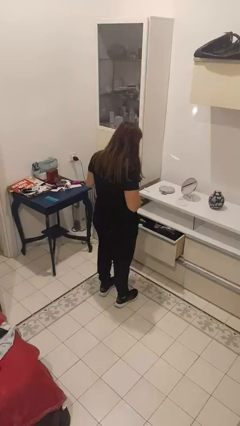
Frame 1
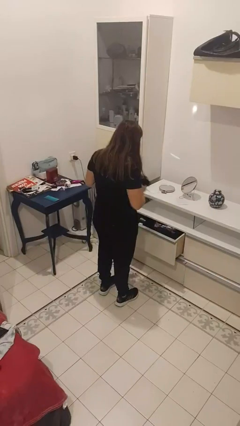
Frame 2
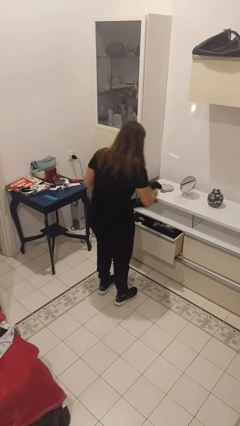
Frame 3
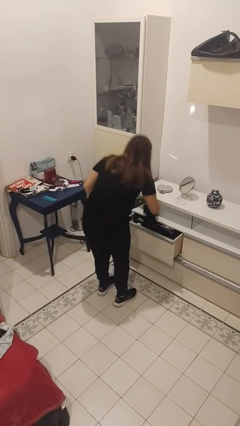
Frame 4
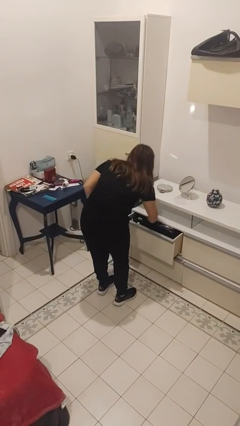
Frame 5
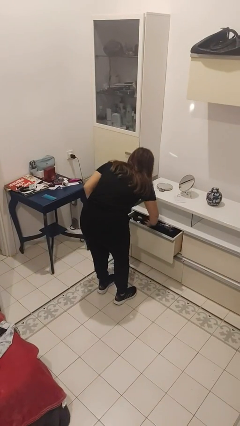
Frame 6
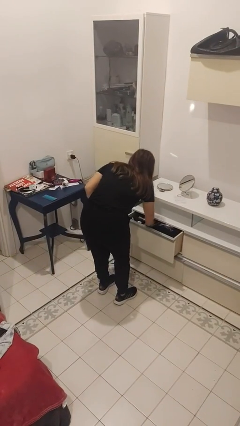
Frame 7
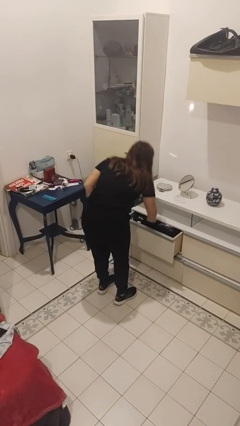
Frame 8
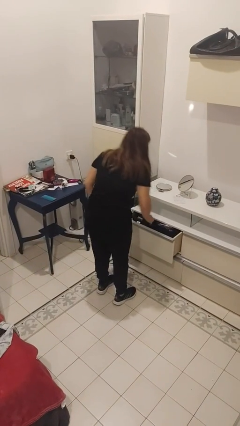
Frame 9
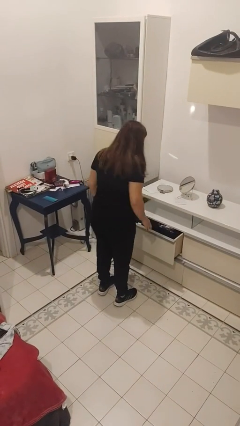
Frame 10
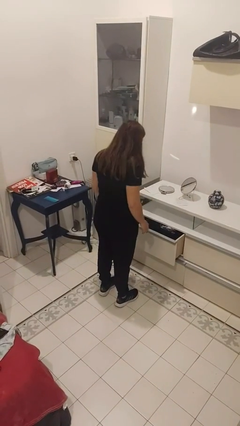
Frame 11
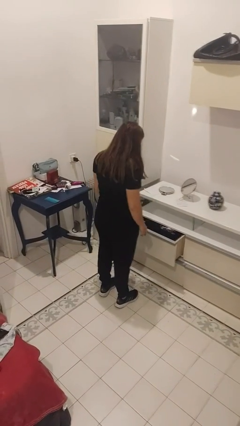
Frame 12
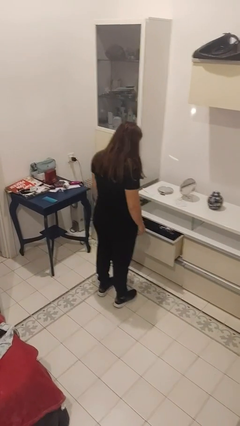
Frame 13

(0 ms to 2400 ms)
person puts clothes into dresser

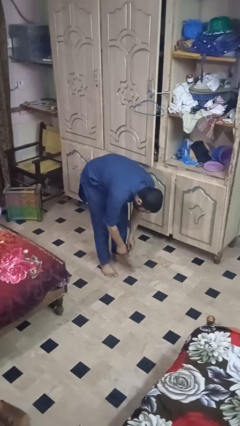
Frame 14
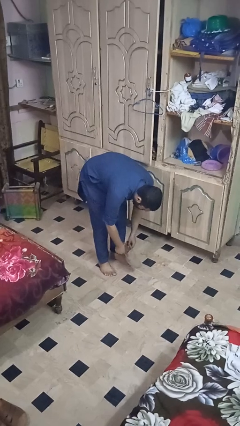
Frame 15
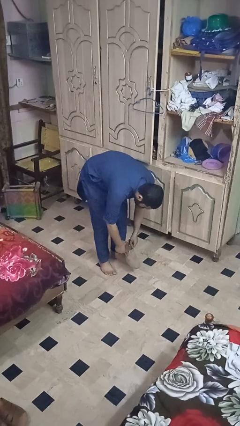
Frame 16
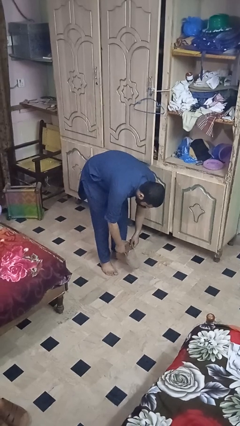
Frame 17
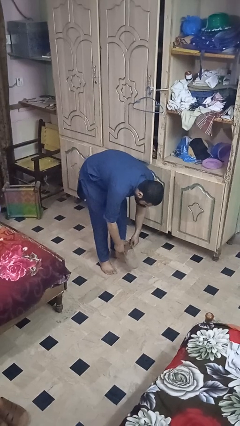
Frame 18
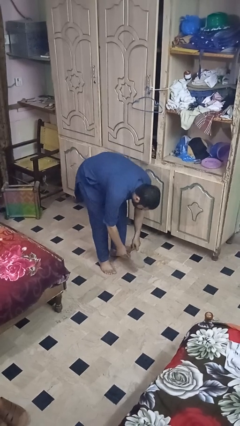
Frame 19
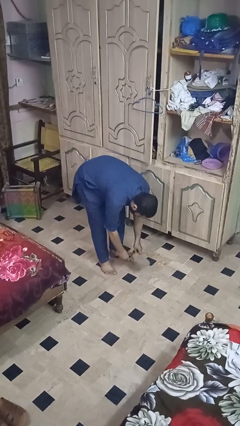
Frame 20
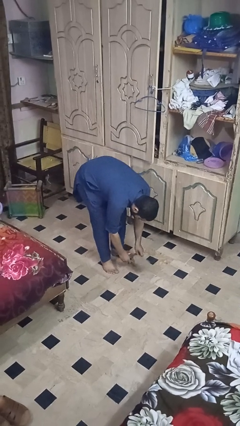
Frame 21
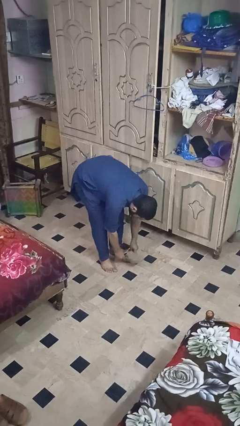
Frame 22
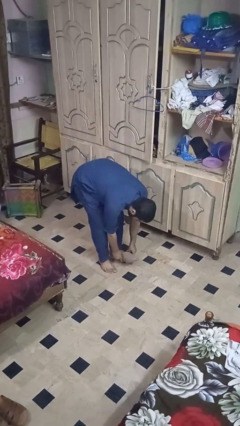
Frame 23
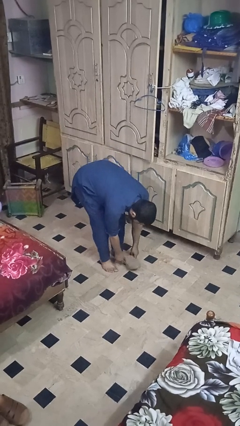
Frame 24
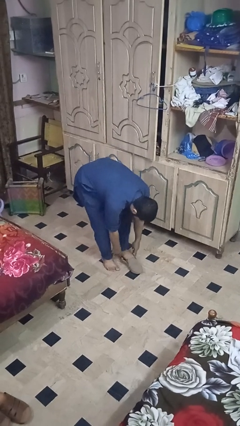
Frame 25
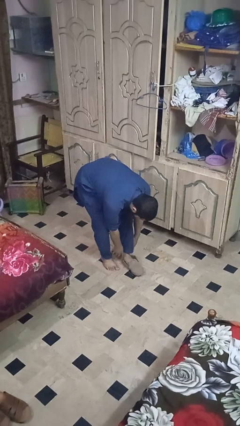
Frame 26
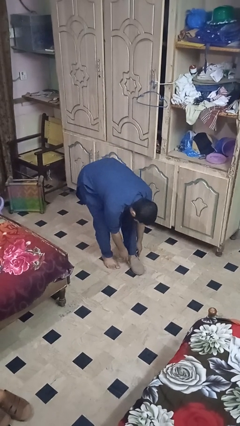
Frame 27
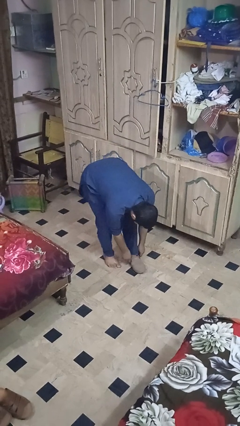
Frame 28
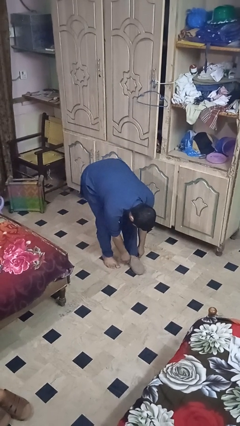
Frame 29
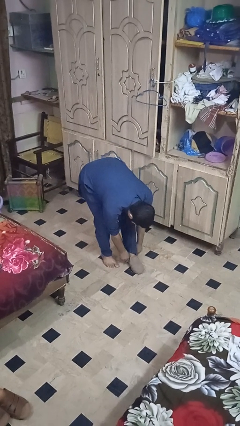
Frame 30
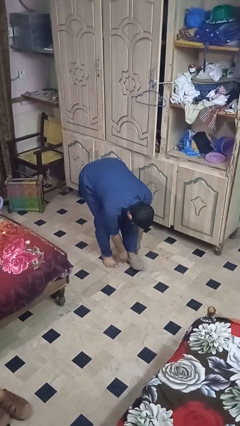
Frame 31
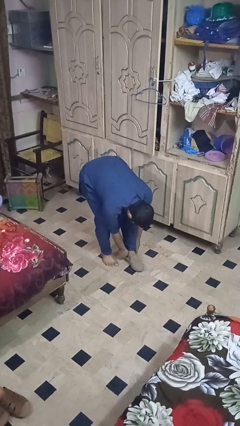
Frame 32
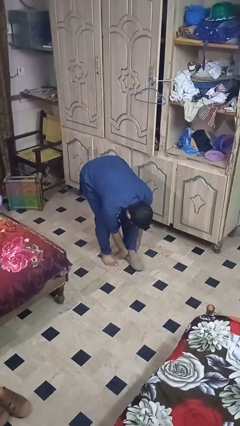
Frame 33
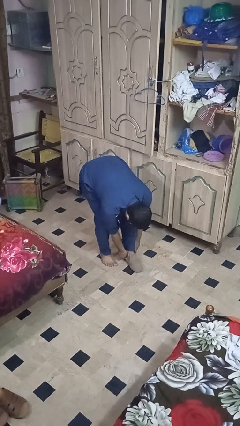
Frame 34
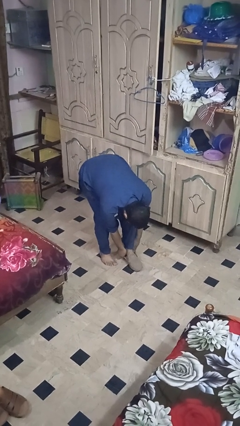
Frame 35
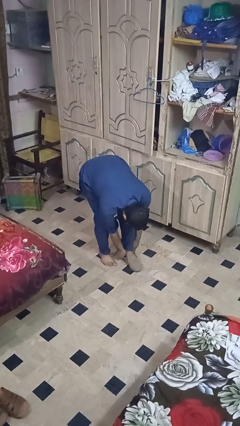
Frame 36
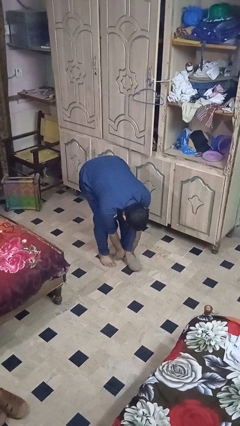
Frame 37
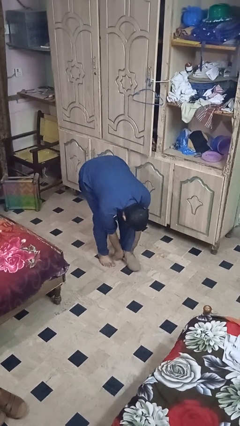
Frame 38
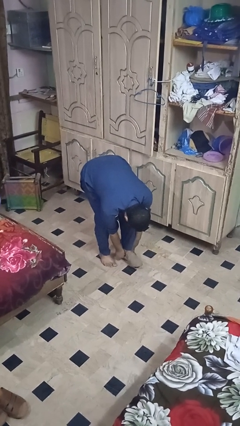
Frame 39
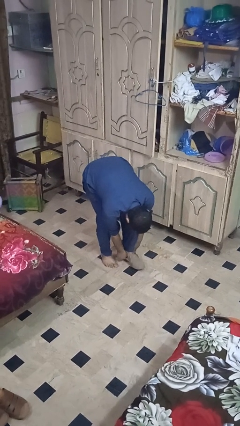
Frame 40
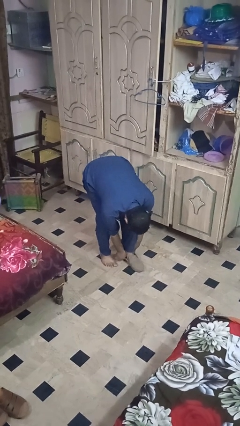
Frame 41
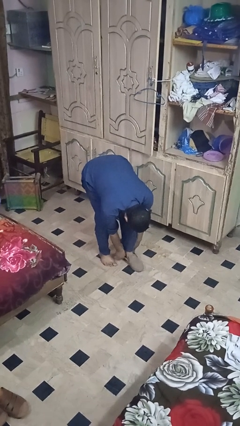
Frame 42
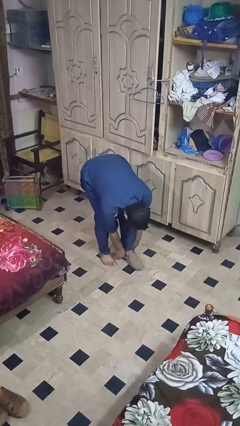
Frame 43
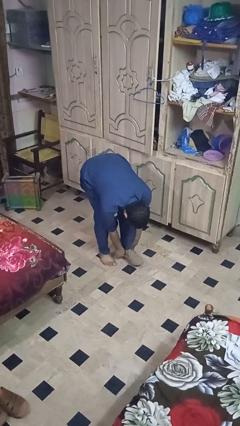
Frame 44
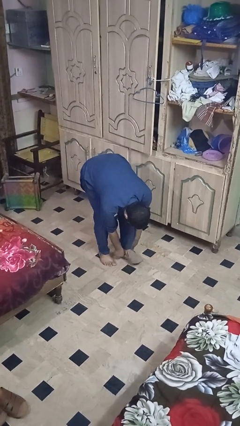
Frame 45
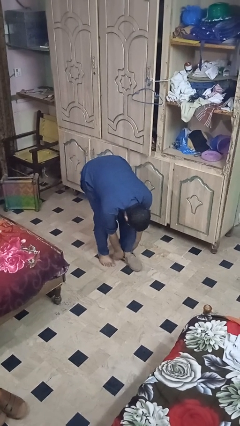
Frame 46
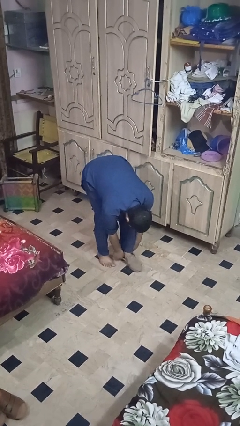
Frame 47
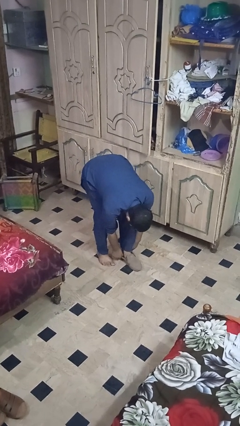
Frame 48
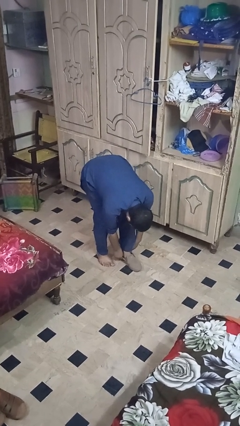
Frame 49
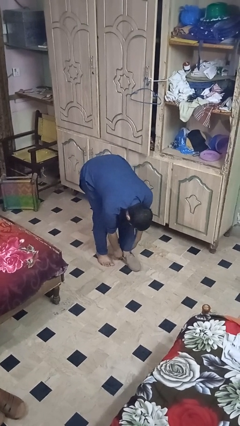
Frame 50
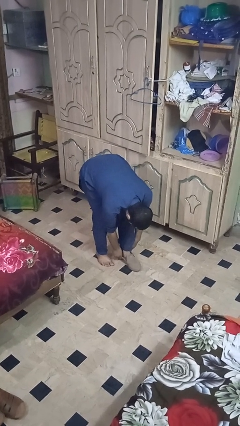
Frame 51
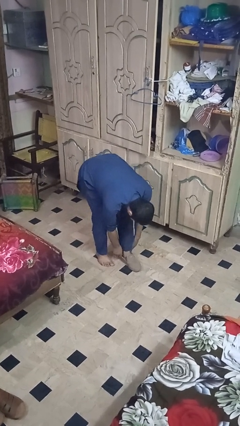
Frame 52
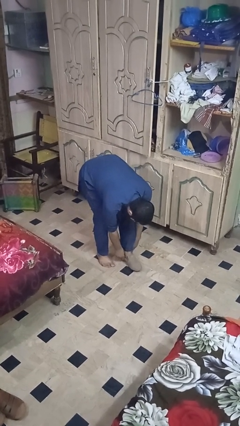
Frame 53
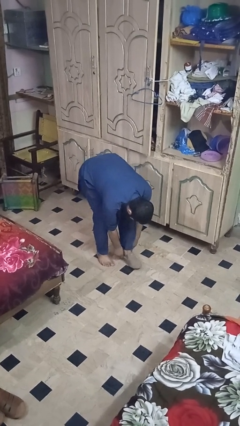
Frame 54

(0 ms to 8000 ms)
person puts on boots

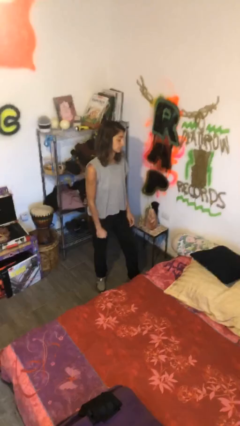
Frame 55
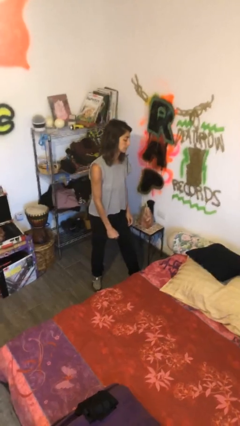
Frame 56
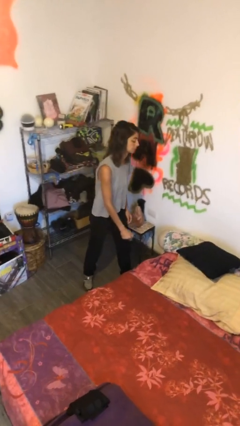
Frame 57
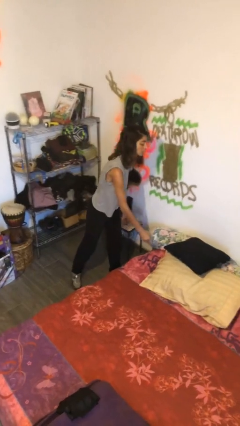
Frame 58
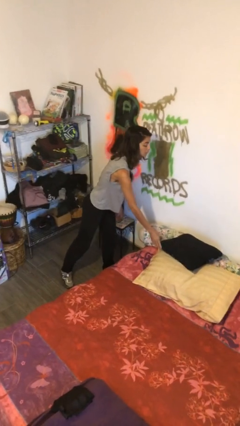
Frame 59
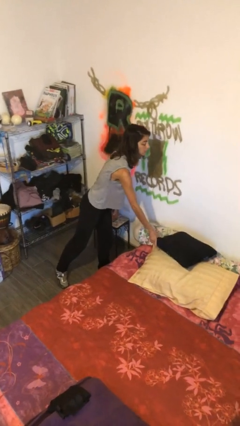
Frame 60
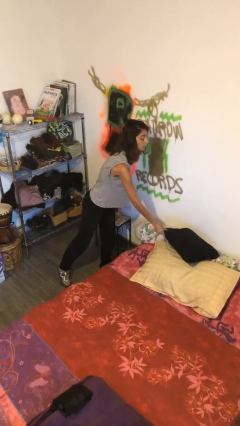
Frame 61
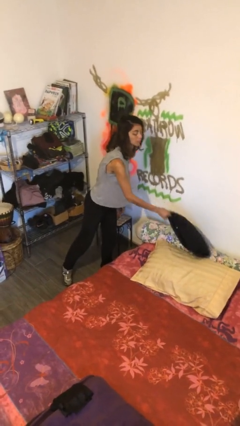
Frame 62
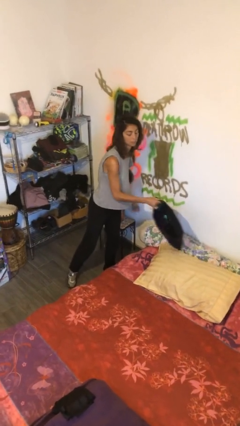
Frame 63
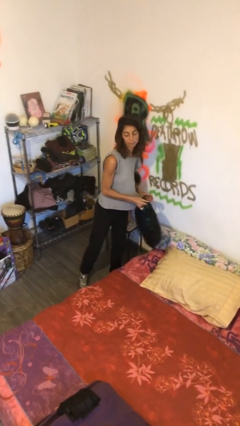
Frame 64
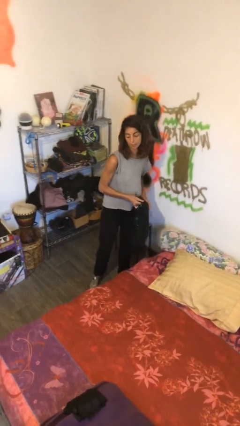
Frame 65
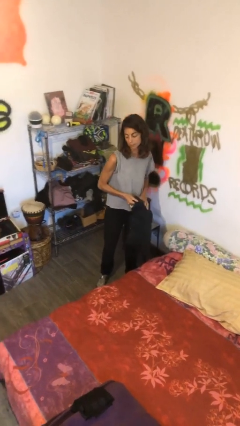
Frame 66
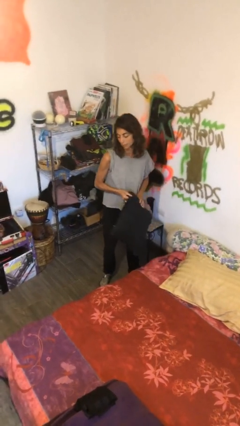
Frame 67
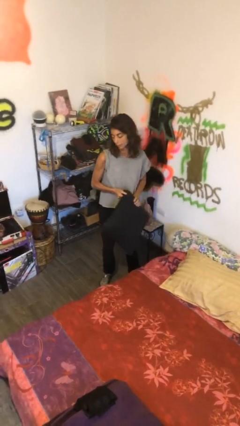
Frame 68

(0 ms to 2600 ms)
person picks up object from bed

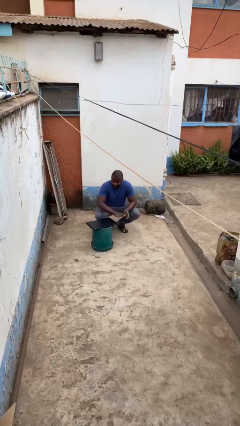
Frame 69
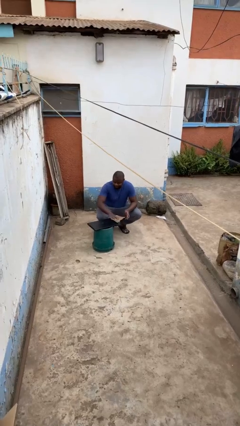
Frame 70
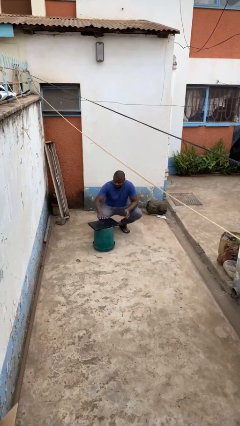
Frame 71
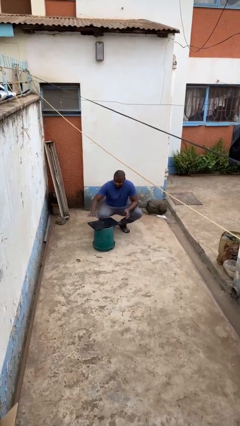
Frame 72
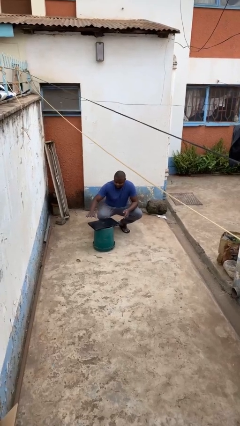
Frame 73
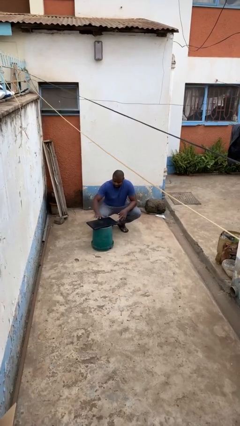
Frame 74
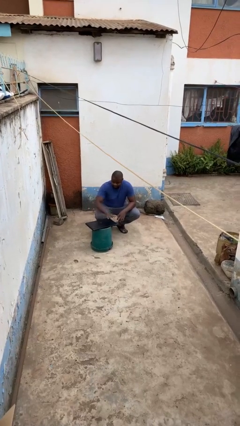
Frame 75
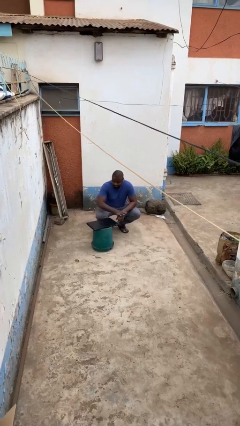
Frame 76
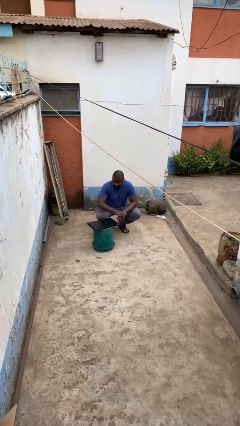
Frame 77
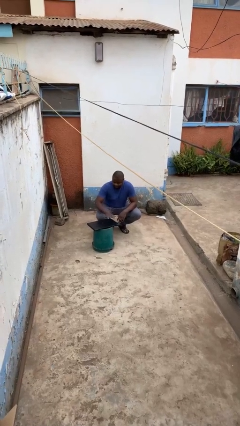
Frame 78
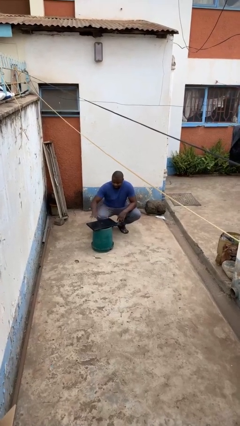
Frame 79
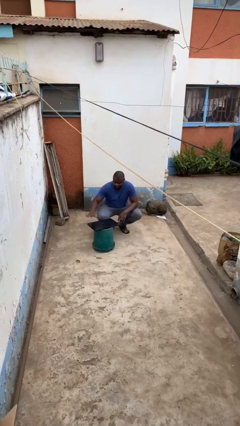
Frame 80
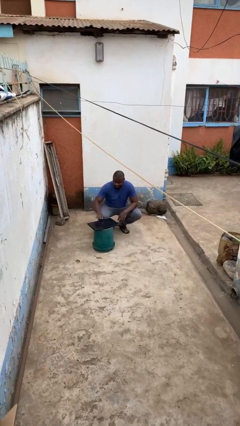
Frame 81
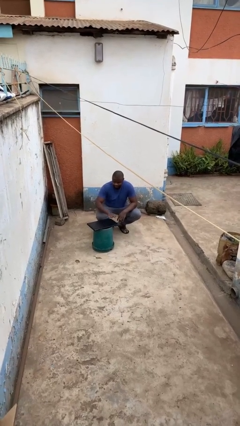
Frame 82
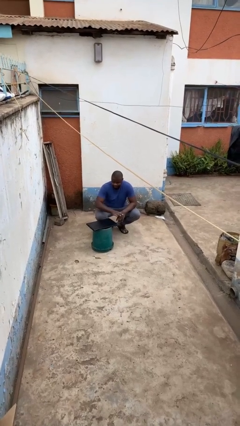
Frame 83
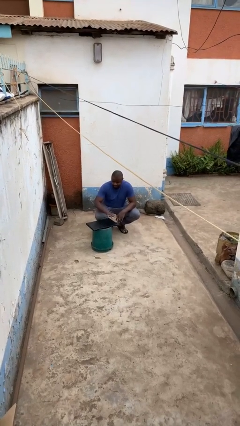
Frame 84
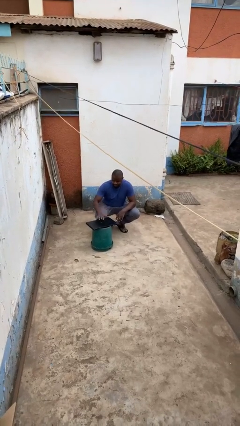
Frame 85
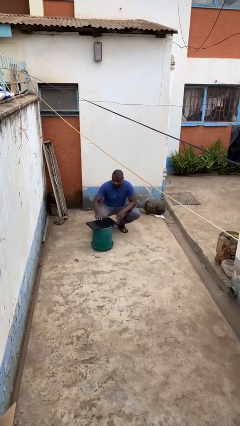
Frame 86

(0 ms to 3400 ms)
person waves hand over object

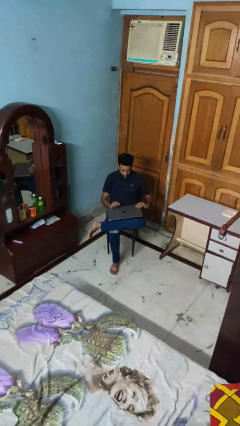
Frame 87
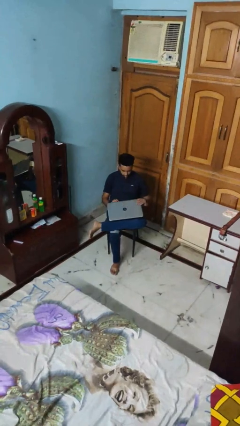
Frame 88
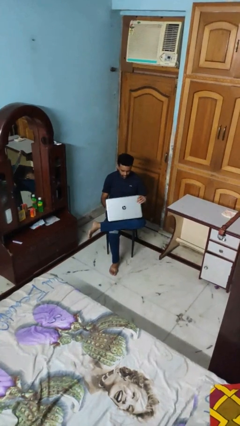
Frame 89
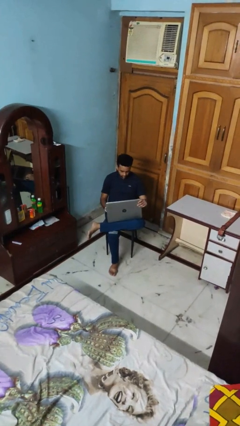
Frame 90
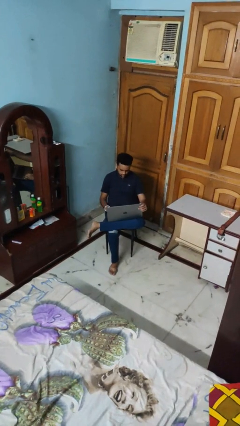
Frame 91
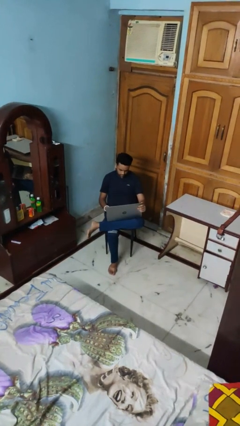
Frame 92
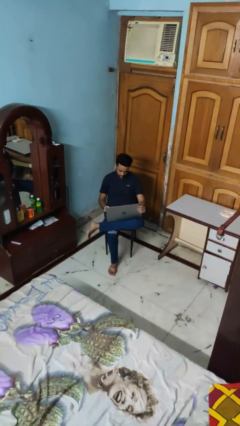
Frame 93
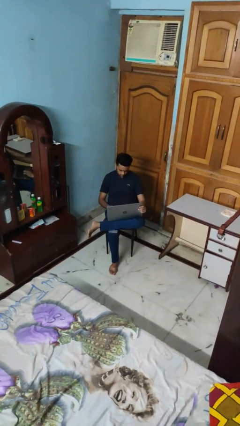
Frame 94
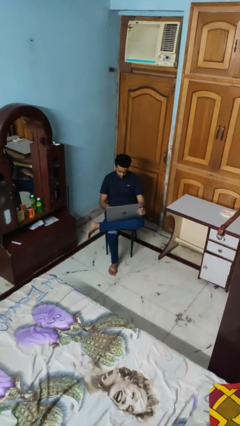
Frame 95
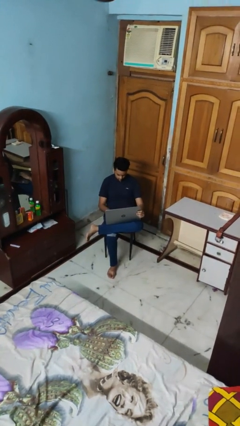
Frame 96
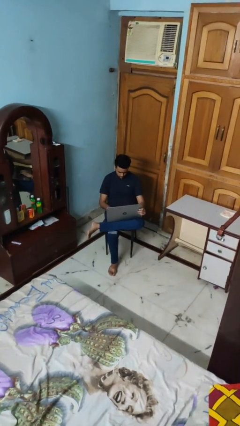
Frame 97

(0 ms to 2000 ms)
person opens laptop
